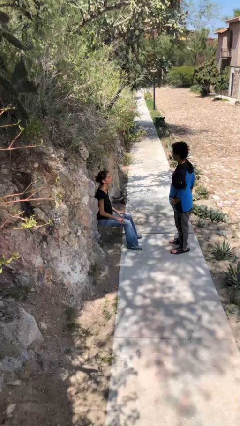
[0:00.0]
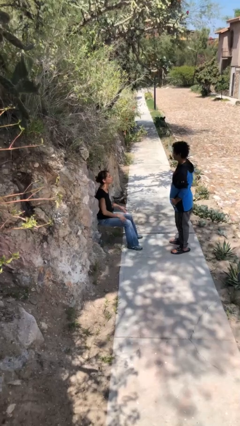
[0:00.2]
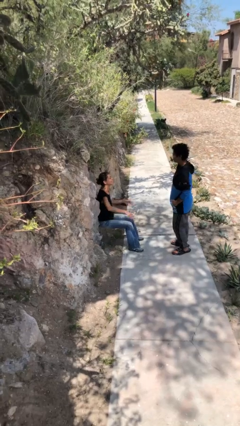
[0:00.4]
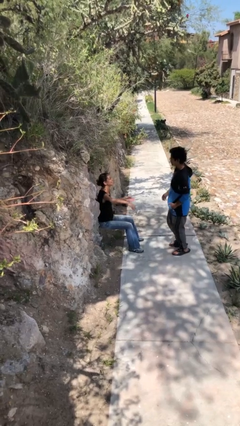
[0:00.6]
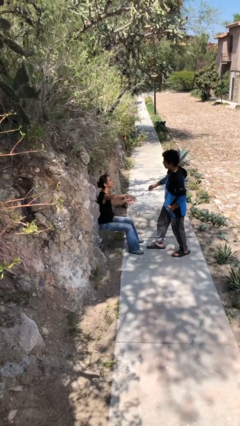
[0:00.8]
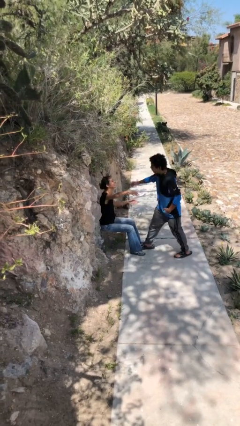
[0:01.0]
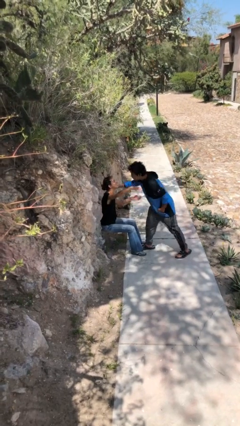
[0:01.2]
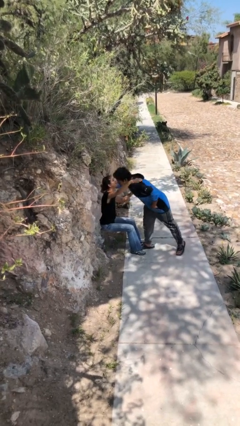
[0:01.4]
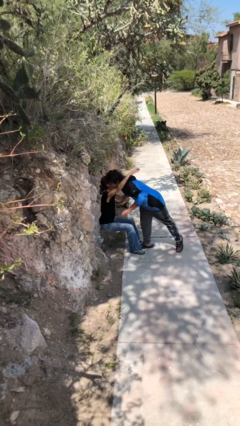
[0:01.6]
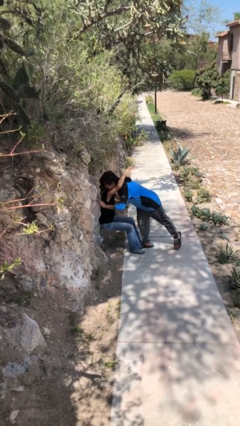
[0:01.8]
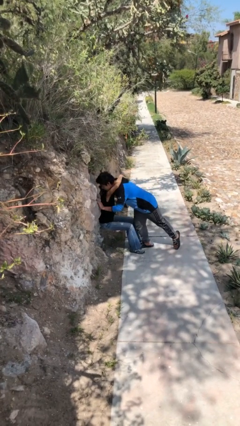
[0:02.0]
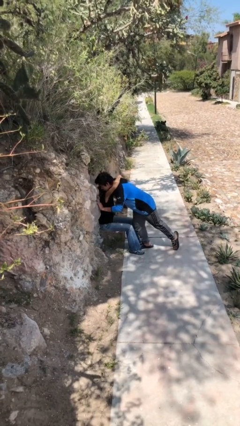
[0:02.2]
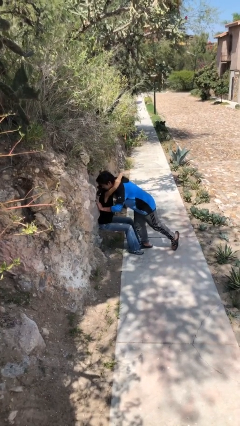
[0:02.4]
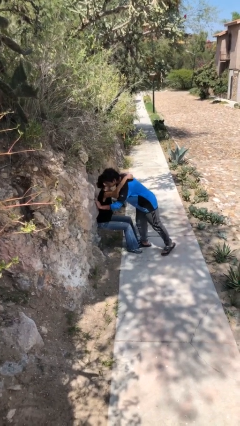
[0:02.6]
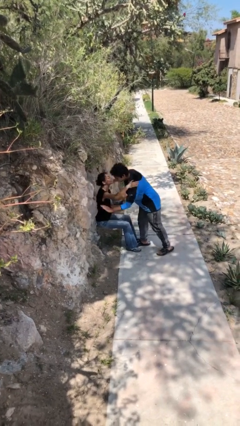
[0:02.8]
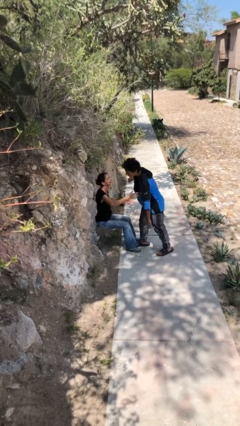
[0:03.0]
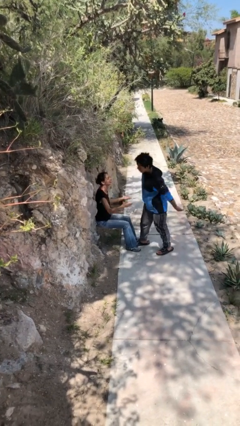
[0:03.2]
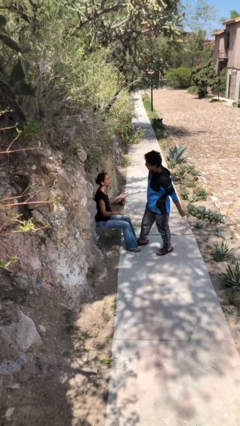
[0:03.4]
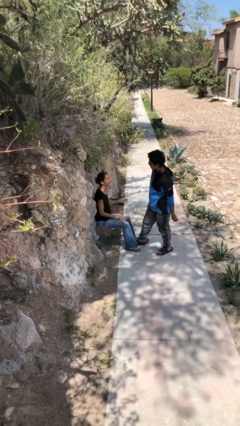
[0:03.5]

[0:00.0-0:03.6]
person embraces person

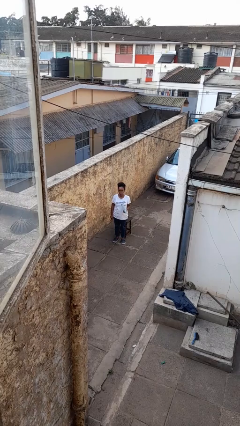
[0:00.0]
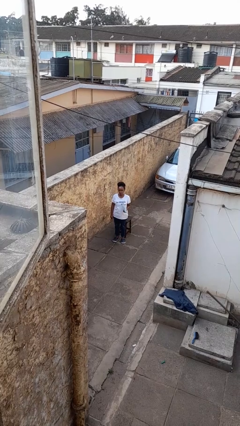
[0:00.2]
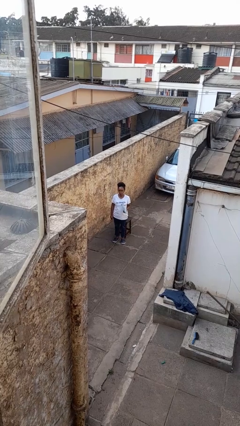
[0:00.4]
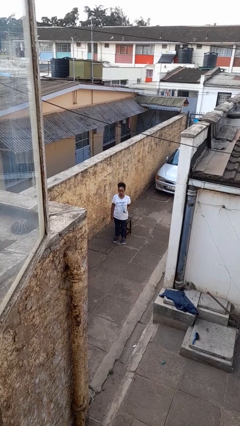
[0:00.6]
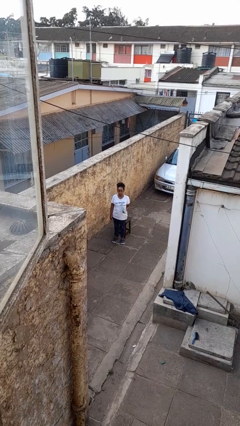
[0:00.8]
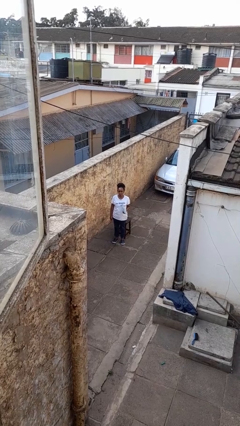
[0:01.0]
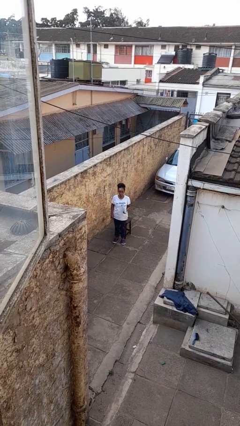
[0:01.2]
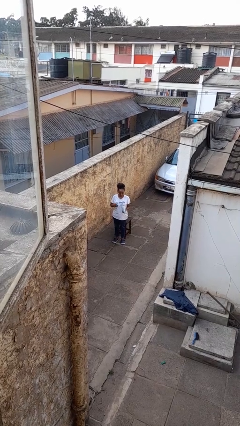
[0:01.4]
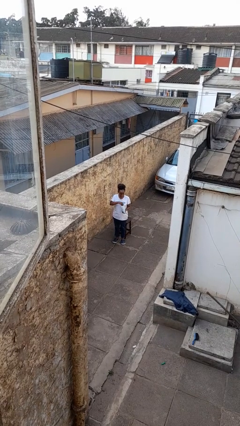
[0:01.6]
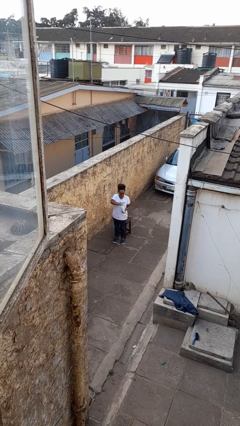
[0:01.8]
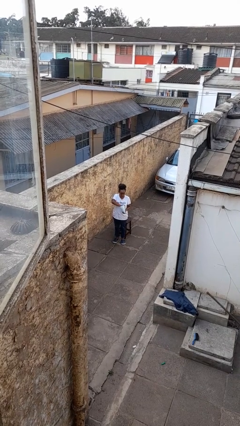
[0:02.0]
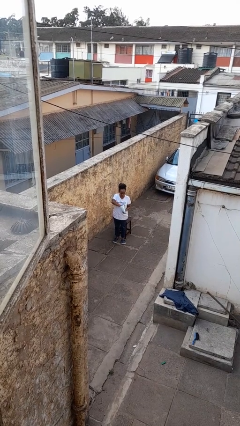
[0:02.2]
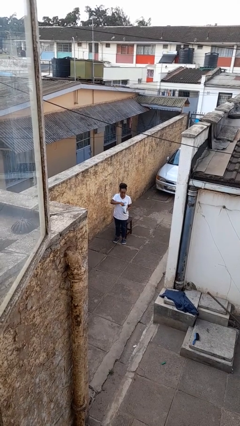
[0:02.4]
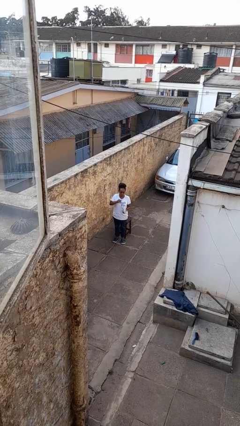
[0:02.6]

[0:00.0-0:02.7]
person eats snack from bag

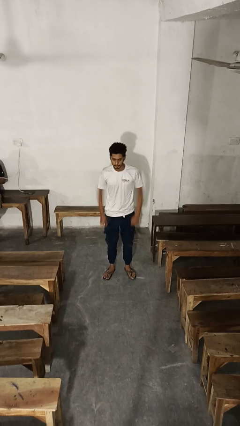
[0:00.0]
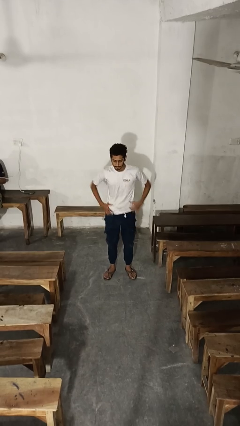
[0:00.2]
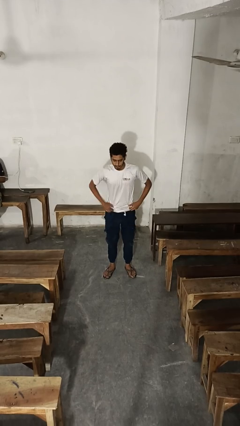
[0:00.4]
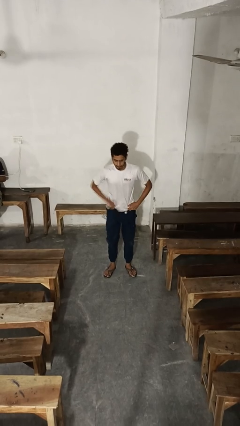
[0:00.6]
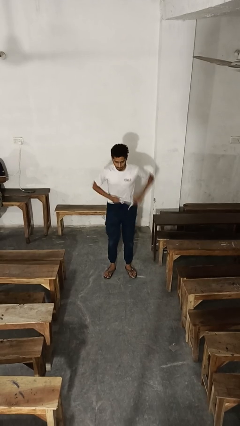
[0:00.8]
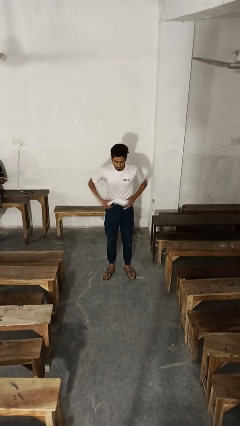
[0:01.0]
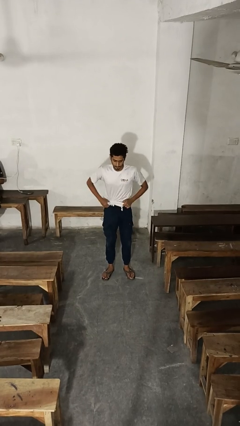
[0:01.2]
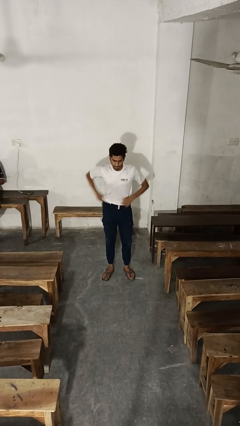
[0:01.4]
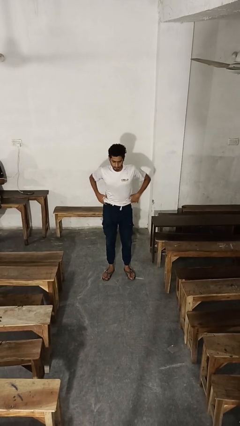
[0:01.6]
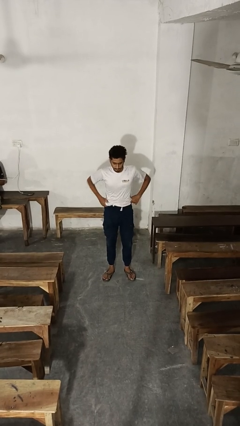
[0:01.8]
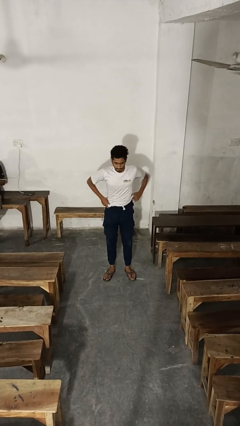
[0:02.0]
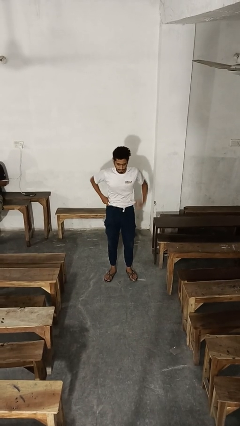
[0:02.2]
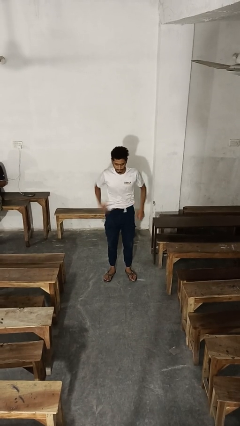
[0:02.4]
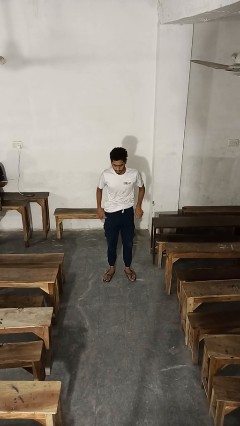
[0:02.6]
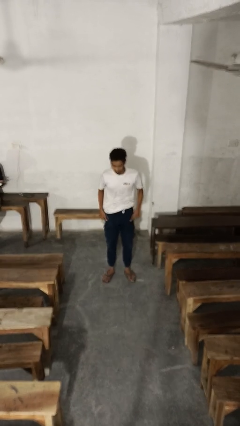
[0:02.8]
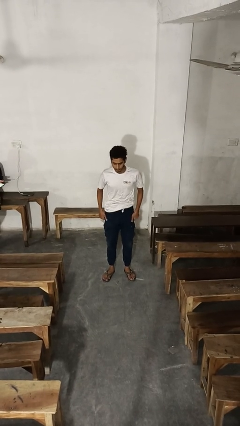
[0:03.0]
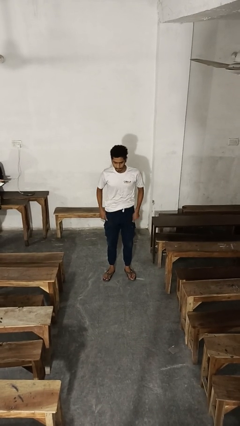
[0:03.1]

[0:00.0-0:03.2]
person hikes up pants

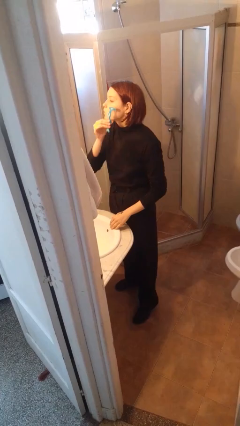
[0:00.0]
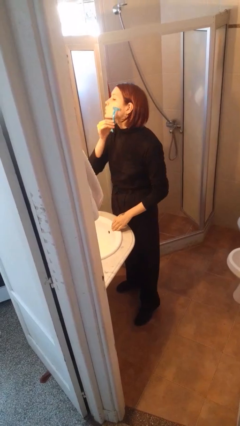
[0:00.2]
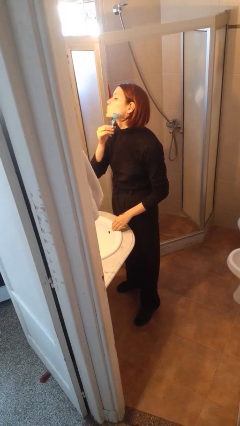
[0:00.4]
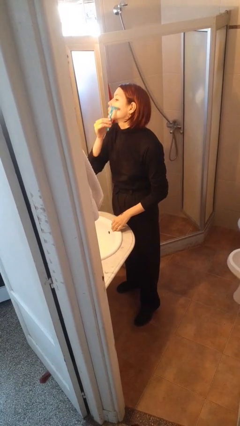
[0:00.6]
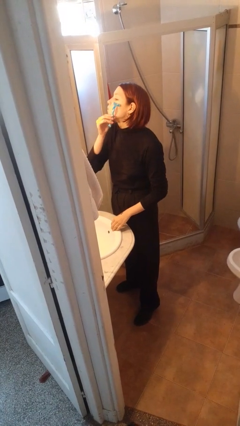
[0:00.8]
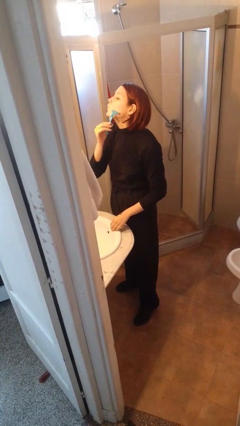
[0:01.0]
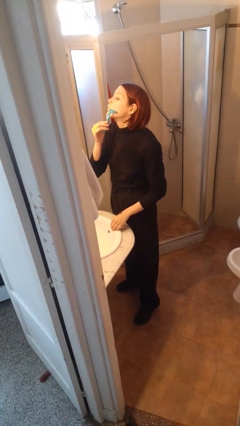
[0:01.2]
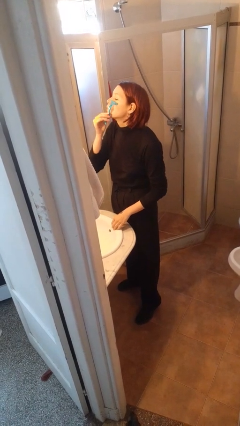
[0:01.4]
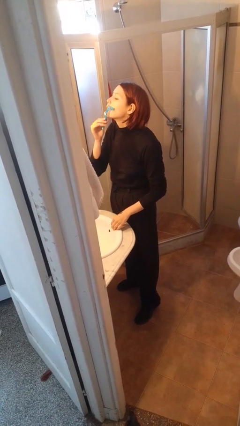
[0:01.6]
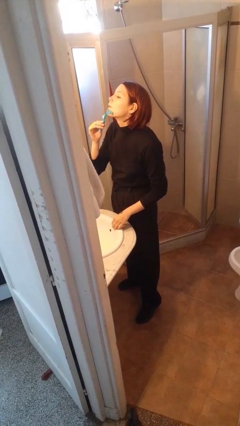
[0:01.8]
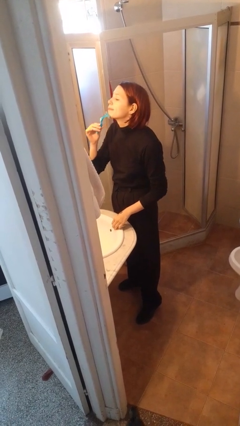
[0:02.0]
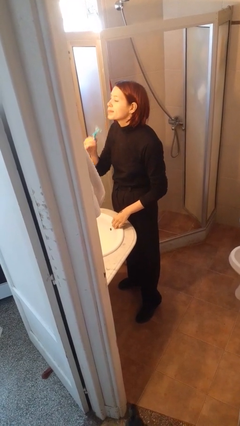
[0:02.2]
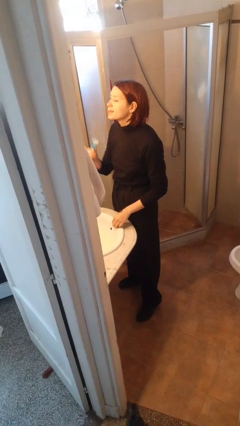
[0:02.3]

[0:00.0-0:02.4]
person shaves face

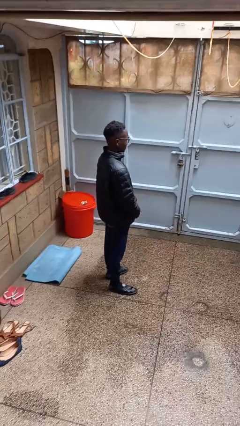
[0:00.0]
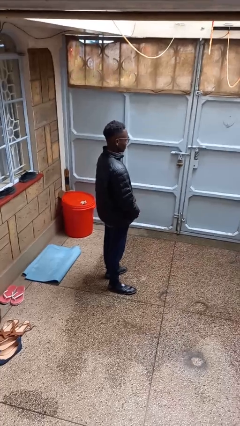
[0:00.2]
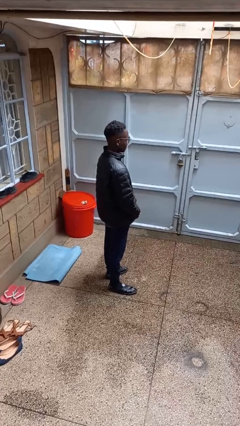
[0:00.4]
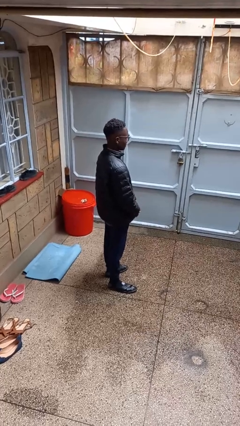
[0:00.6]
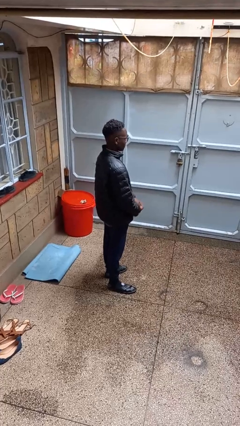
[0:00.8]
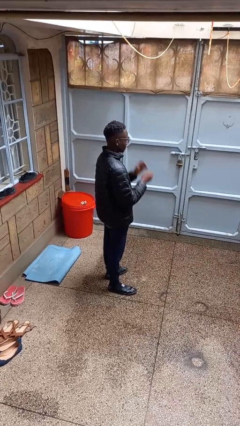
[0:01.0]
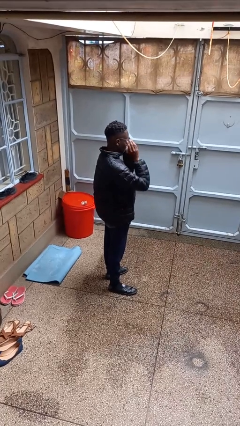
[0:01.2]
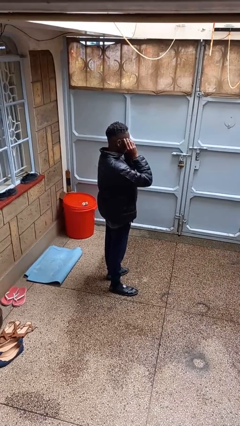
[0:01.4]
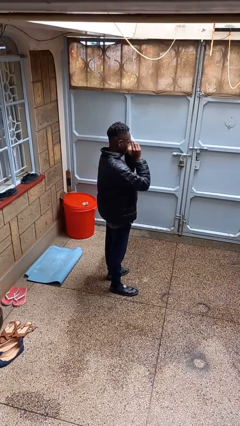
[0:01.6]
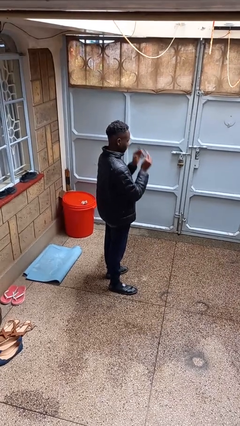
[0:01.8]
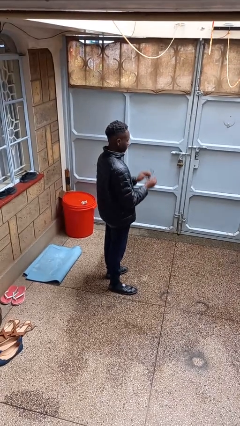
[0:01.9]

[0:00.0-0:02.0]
person takes off glasses

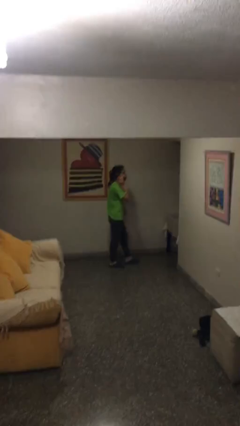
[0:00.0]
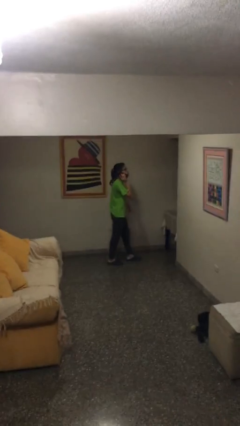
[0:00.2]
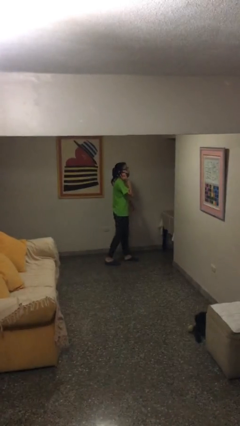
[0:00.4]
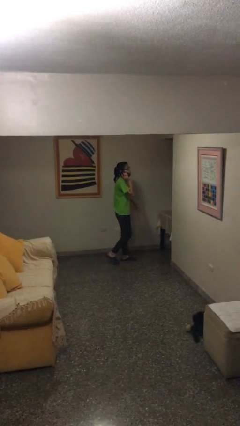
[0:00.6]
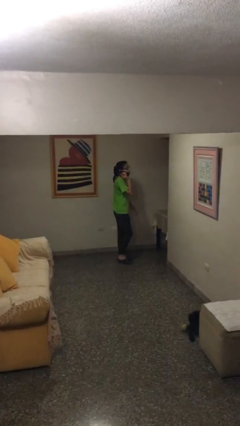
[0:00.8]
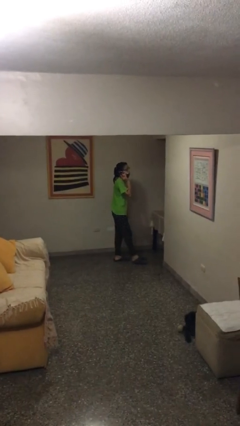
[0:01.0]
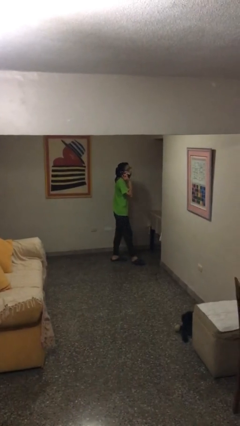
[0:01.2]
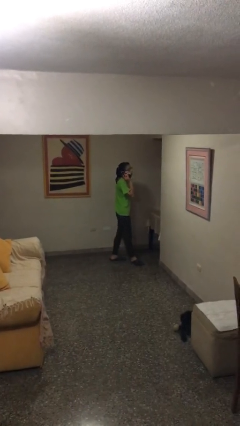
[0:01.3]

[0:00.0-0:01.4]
person talks on phone

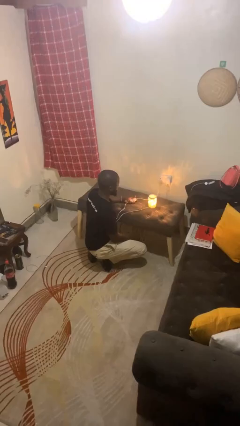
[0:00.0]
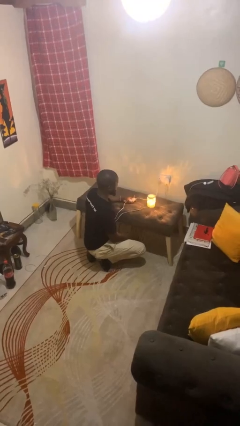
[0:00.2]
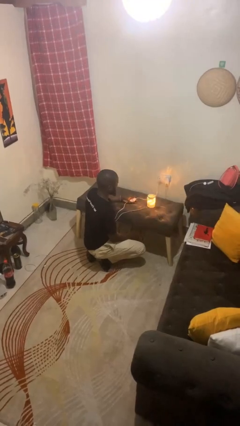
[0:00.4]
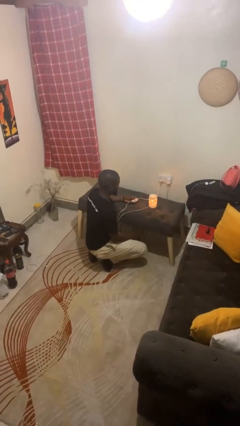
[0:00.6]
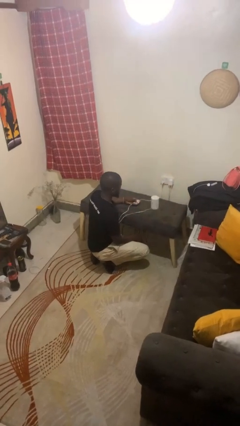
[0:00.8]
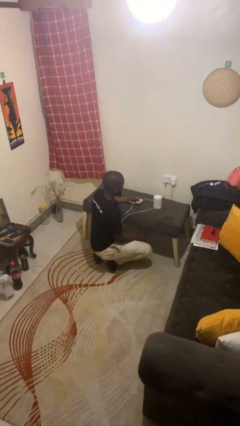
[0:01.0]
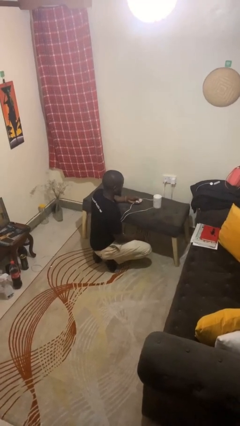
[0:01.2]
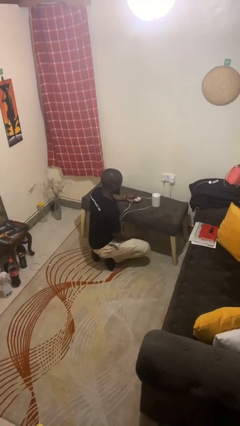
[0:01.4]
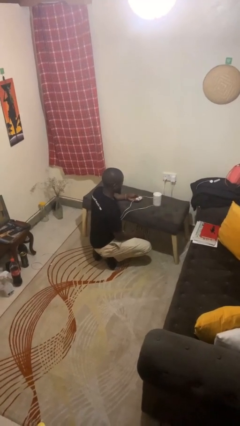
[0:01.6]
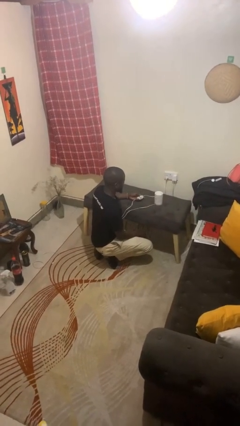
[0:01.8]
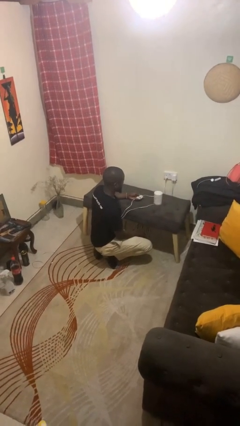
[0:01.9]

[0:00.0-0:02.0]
person turns off lamp
